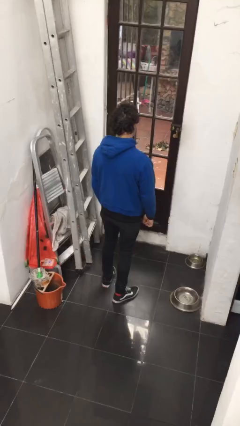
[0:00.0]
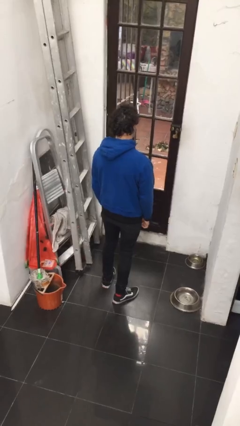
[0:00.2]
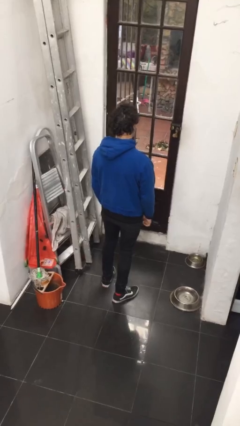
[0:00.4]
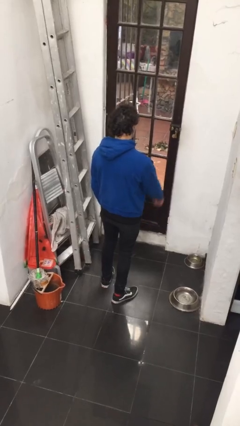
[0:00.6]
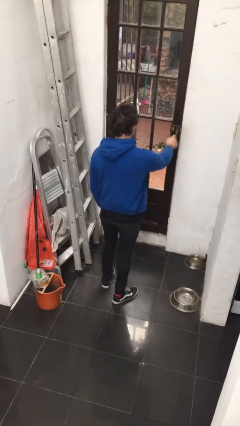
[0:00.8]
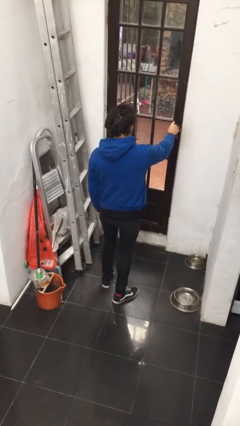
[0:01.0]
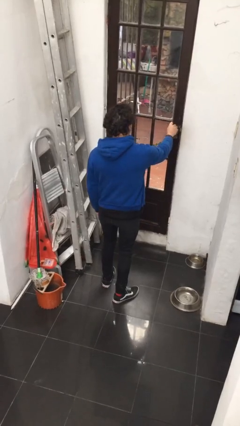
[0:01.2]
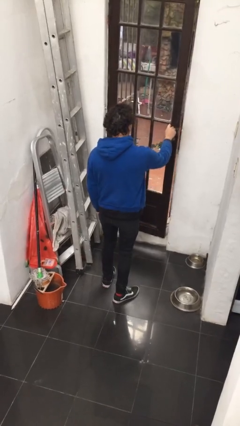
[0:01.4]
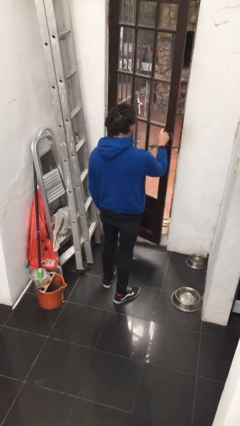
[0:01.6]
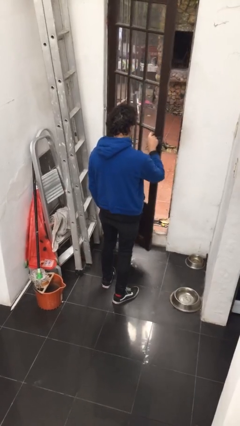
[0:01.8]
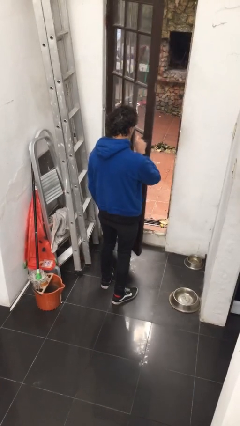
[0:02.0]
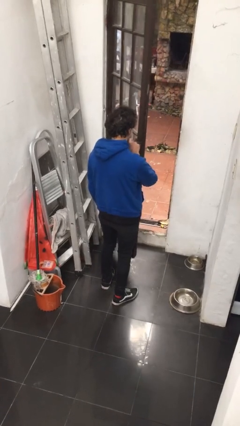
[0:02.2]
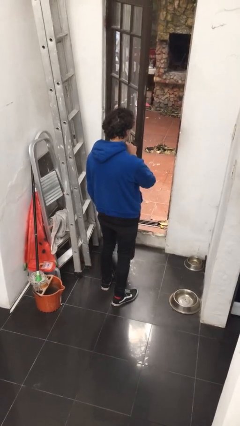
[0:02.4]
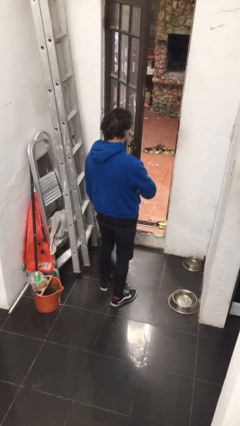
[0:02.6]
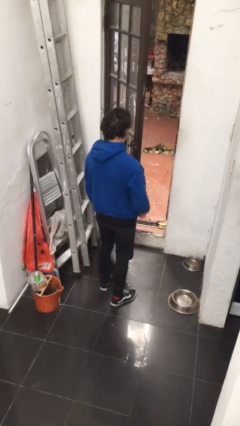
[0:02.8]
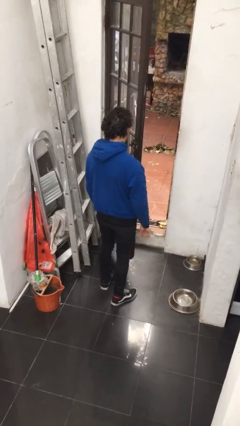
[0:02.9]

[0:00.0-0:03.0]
person opens facility door

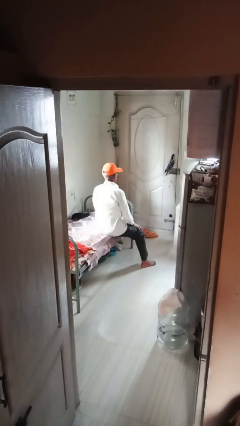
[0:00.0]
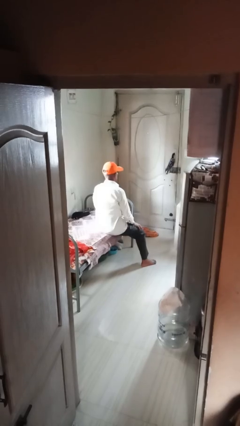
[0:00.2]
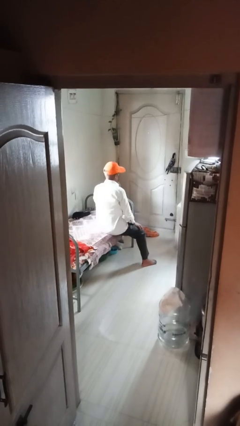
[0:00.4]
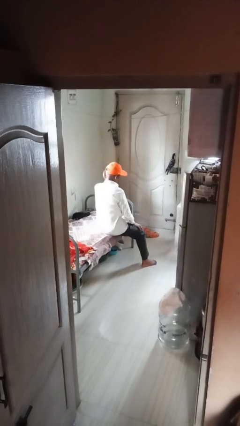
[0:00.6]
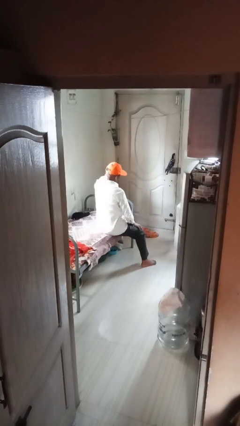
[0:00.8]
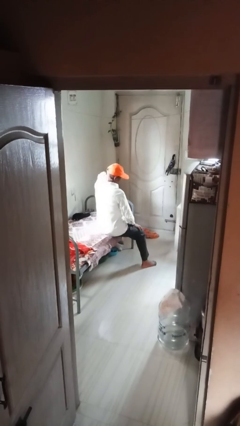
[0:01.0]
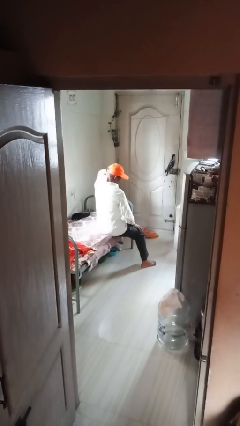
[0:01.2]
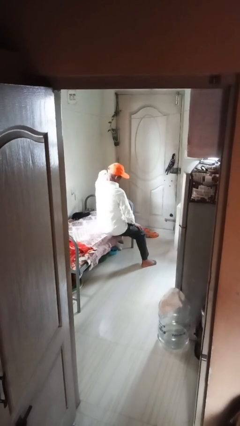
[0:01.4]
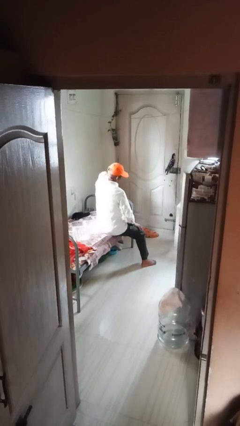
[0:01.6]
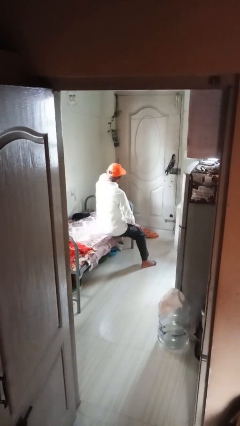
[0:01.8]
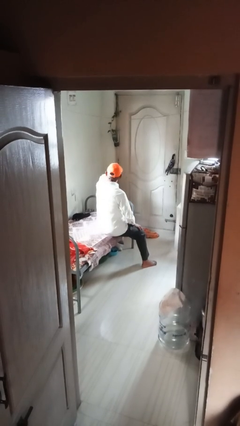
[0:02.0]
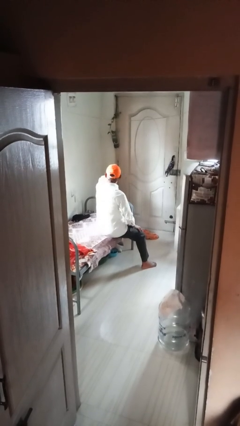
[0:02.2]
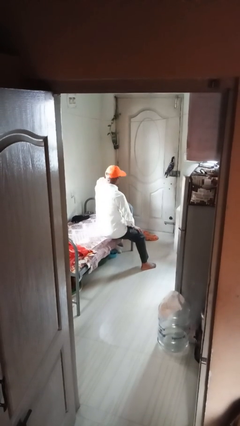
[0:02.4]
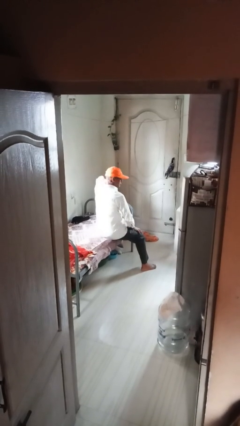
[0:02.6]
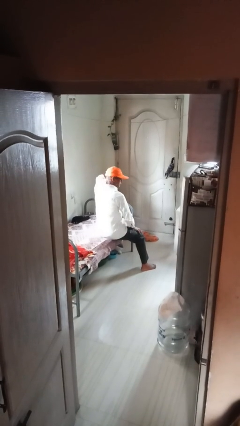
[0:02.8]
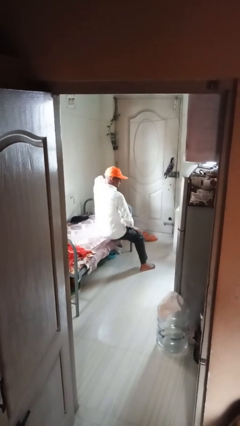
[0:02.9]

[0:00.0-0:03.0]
person rubs neck

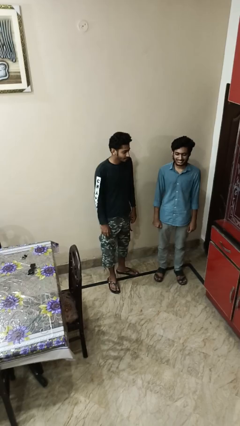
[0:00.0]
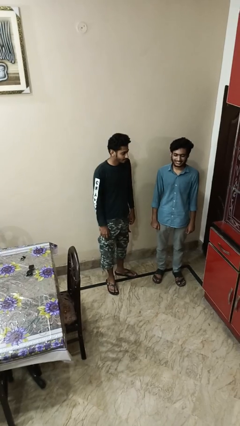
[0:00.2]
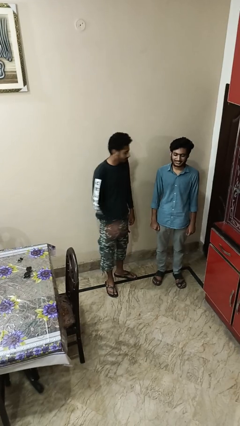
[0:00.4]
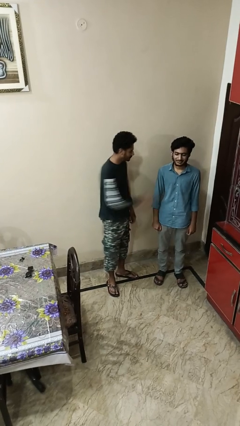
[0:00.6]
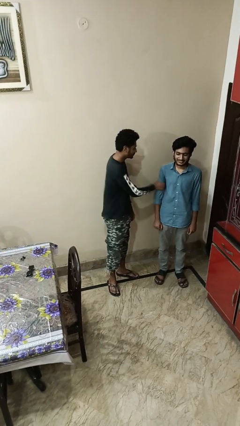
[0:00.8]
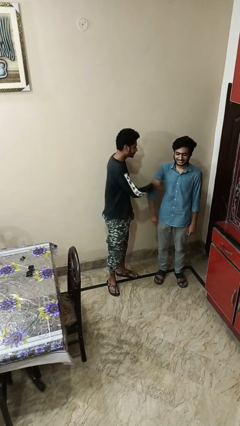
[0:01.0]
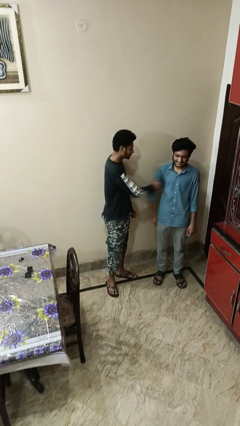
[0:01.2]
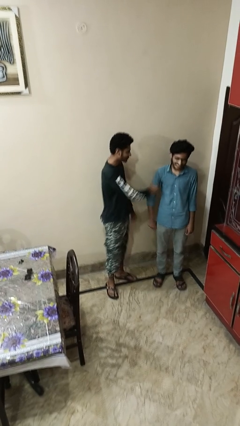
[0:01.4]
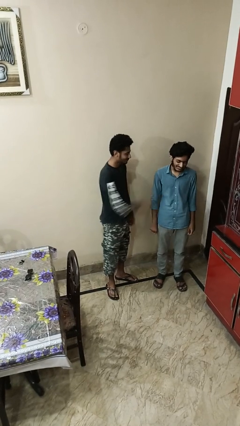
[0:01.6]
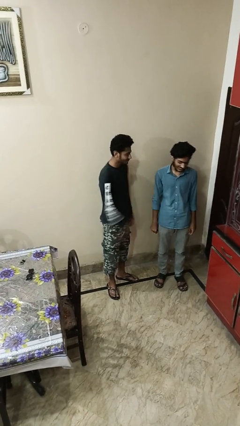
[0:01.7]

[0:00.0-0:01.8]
person grabs person by bicep

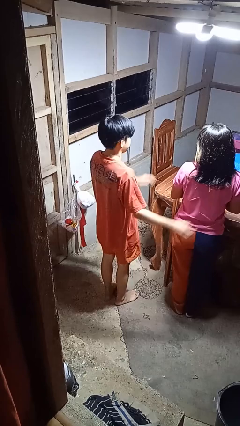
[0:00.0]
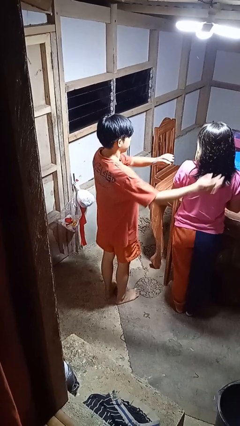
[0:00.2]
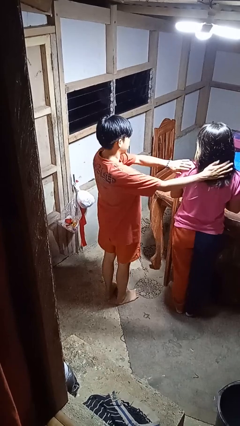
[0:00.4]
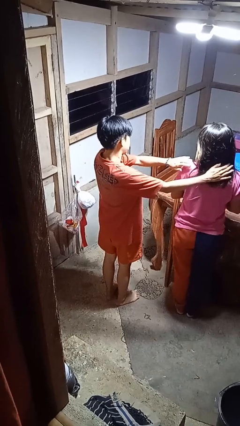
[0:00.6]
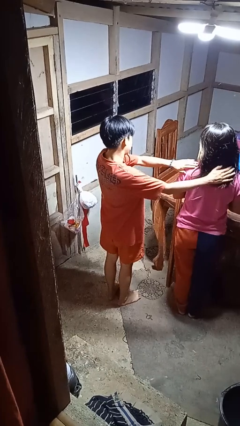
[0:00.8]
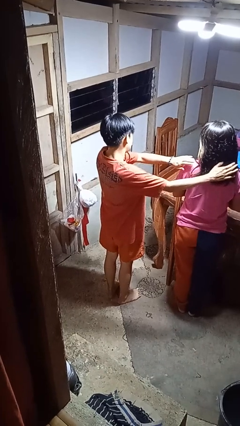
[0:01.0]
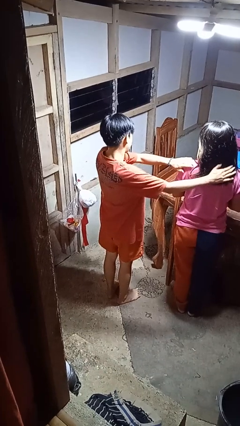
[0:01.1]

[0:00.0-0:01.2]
person pounds shoulders of person

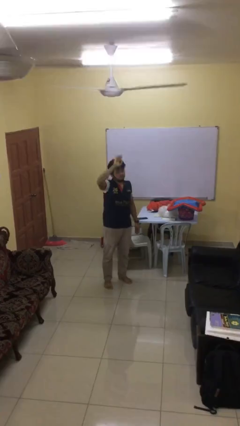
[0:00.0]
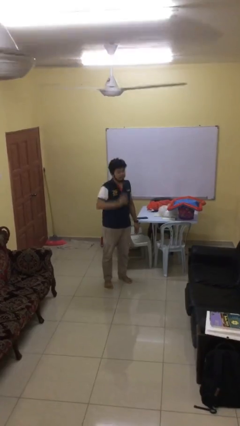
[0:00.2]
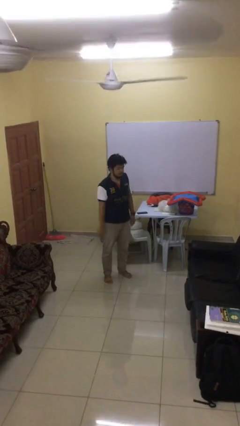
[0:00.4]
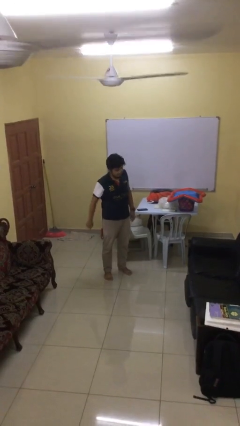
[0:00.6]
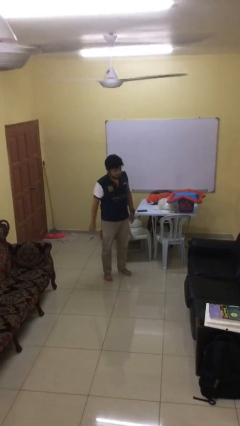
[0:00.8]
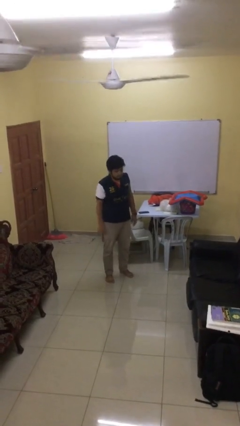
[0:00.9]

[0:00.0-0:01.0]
person gestures lower hand

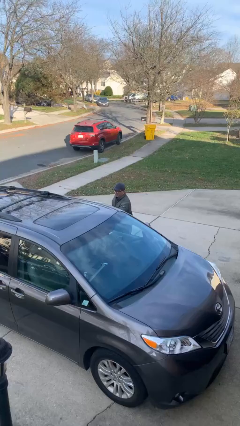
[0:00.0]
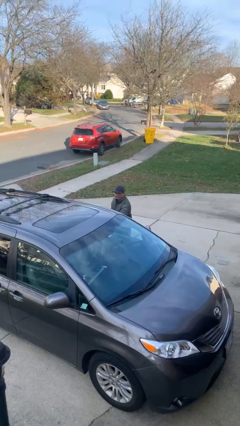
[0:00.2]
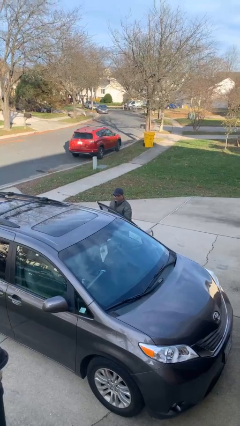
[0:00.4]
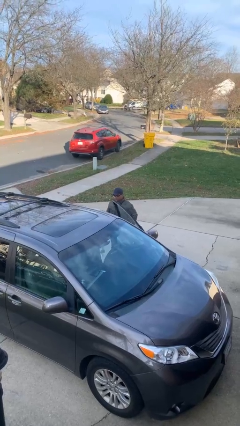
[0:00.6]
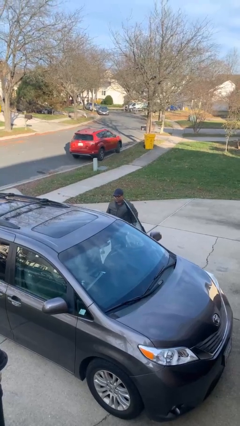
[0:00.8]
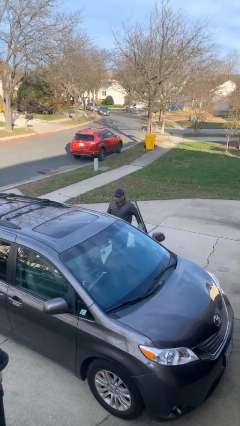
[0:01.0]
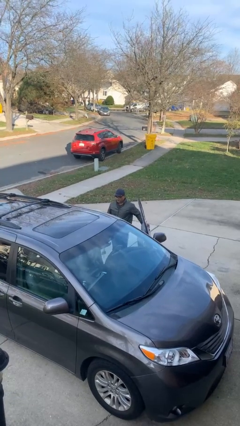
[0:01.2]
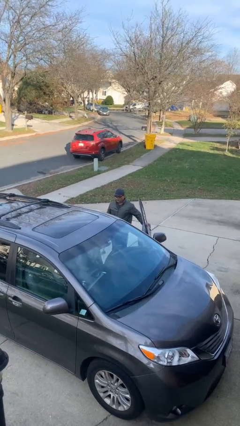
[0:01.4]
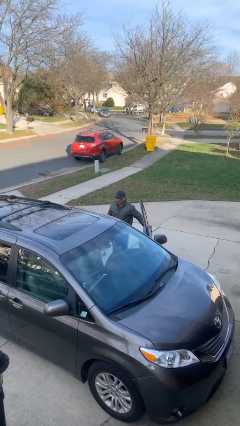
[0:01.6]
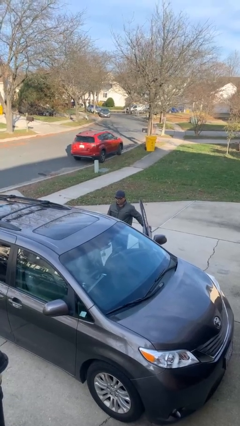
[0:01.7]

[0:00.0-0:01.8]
person opens car door

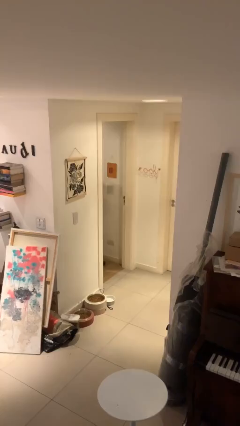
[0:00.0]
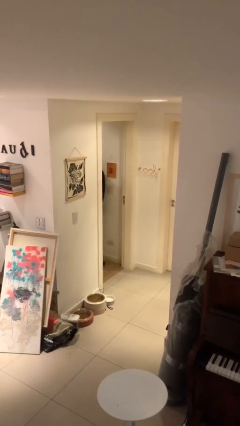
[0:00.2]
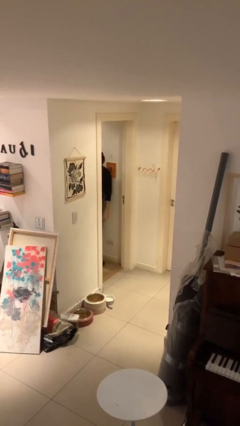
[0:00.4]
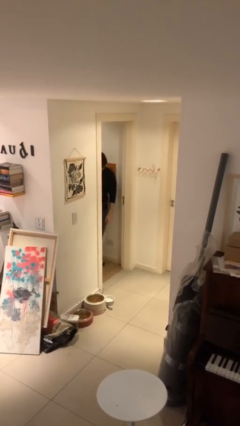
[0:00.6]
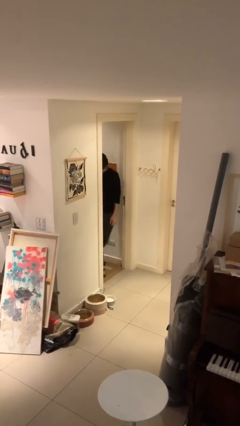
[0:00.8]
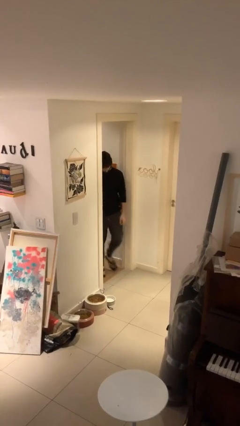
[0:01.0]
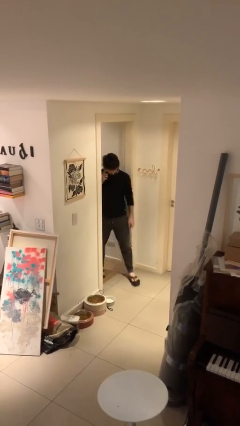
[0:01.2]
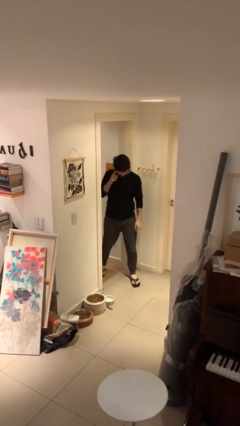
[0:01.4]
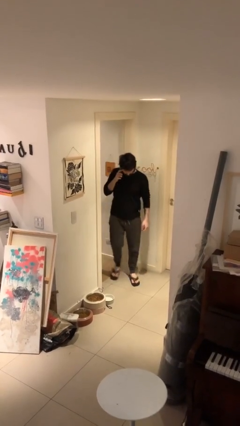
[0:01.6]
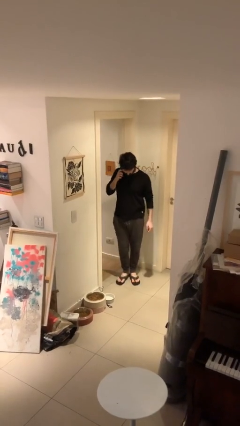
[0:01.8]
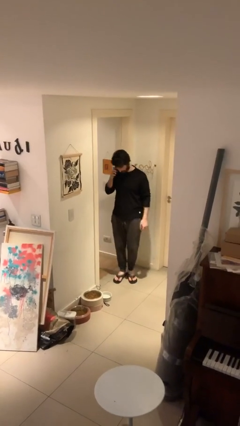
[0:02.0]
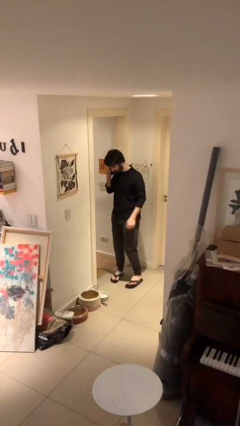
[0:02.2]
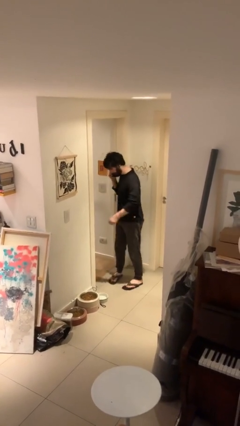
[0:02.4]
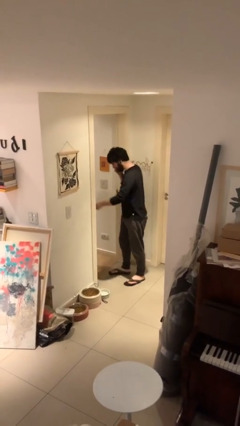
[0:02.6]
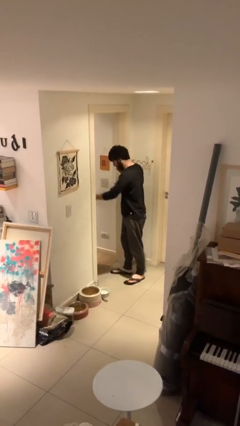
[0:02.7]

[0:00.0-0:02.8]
person enters scene through structure

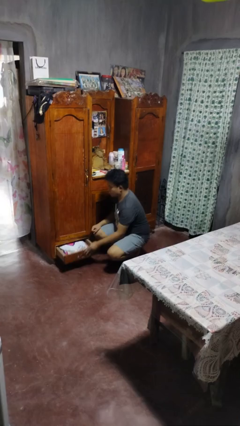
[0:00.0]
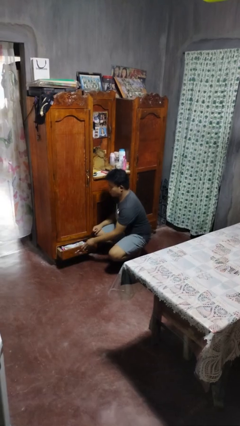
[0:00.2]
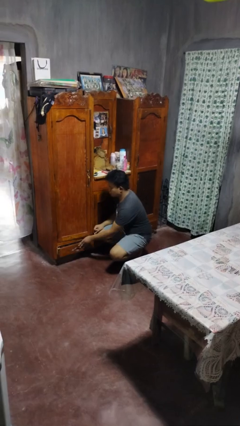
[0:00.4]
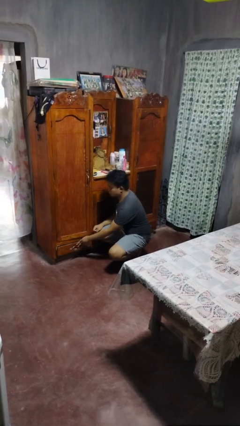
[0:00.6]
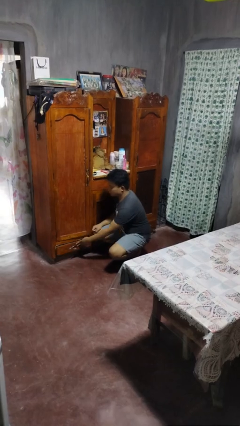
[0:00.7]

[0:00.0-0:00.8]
person closes dresser drawer

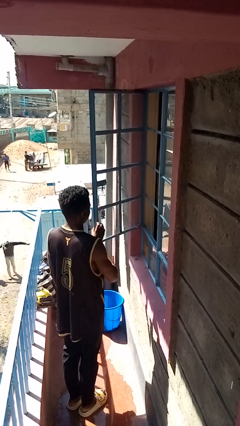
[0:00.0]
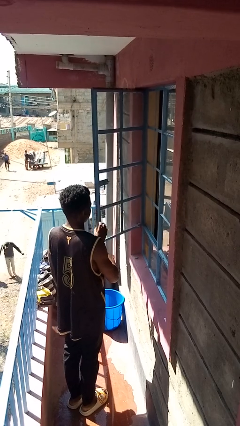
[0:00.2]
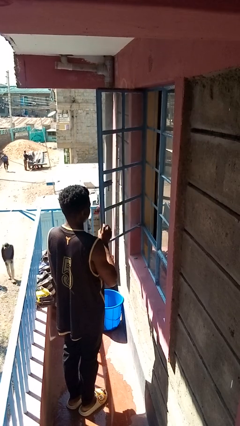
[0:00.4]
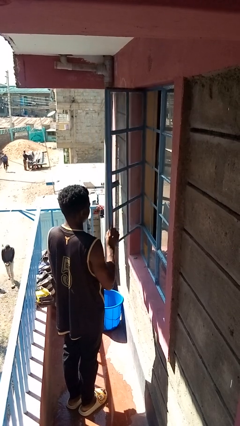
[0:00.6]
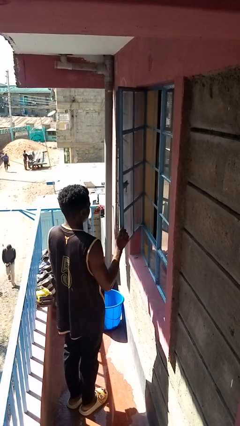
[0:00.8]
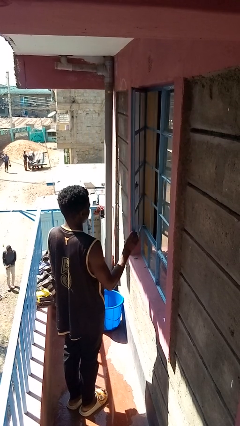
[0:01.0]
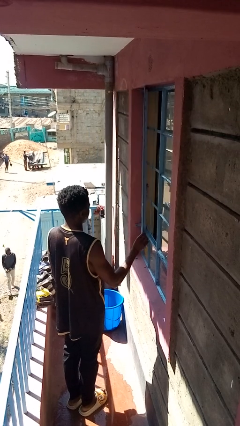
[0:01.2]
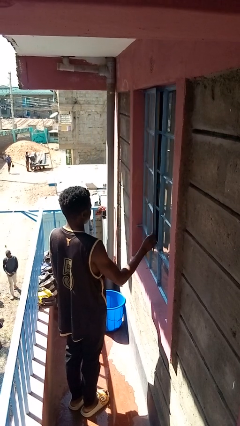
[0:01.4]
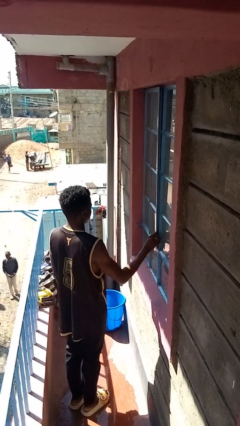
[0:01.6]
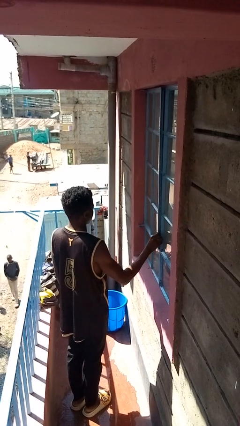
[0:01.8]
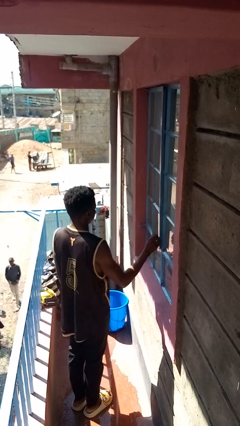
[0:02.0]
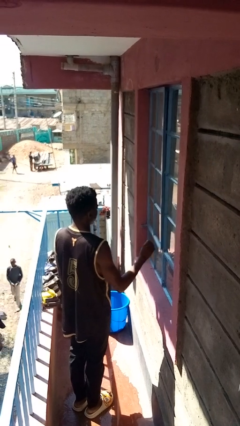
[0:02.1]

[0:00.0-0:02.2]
person closes home window
